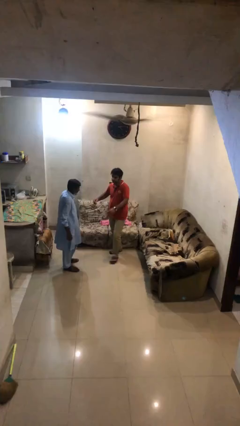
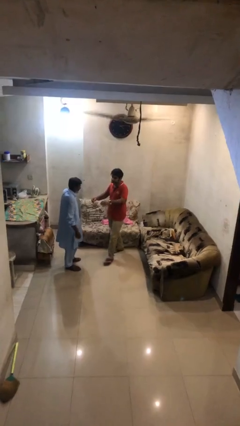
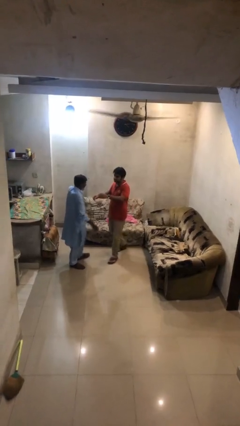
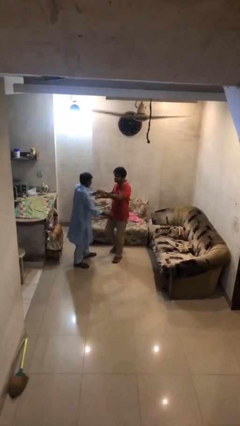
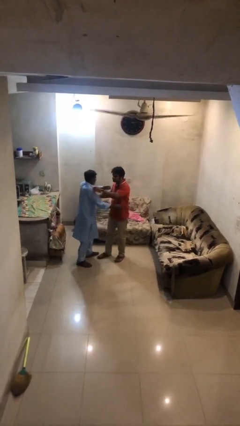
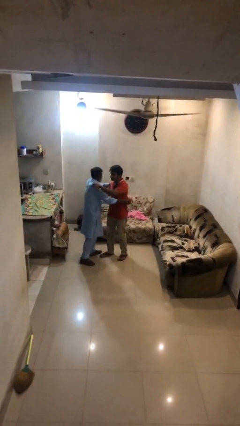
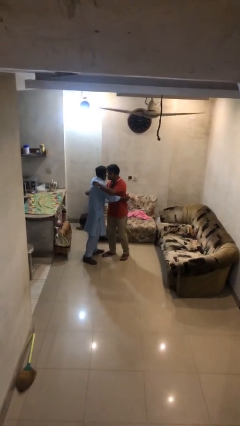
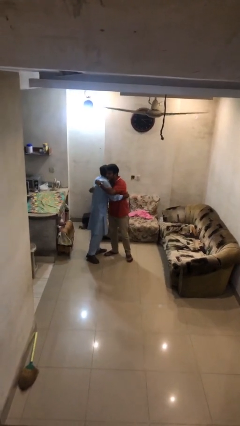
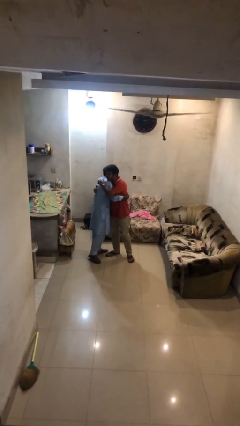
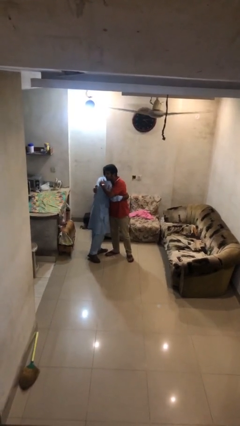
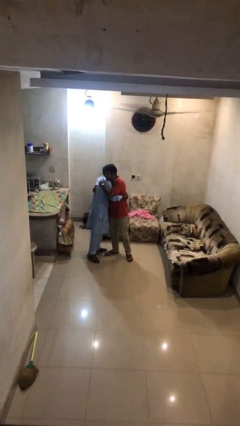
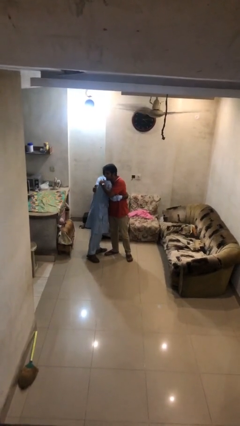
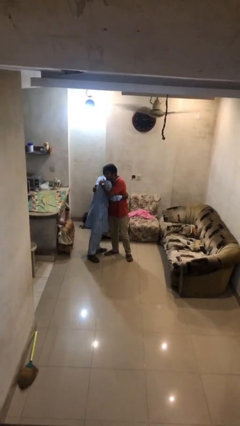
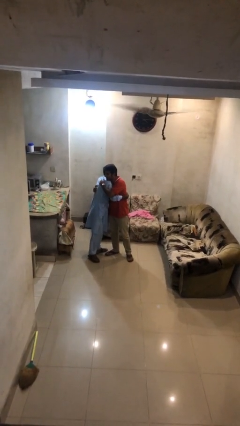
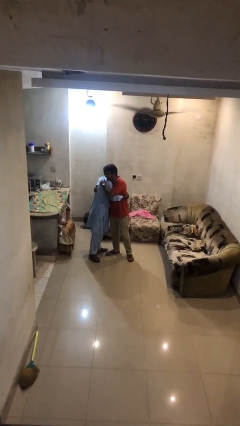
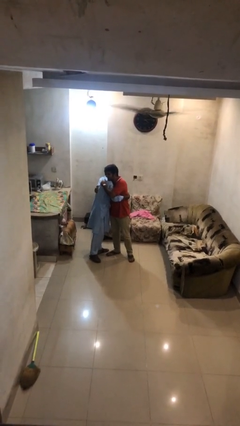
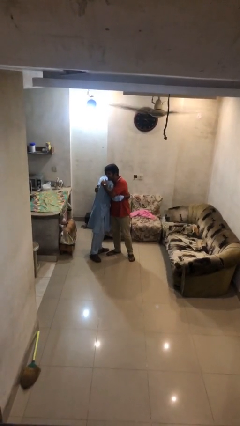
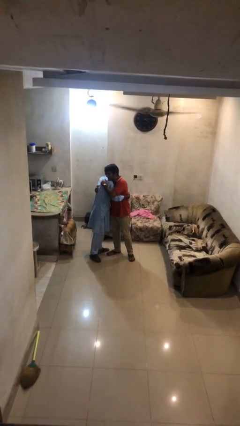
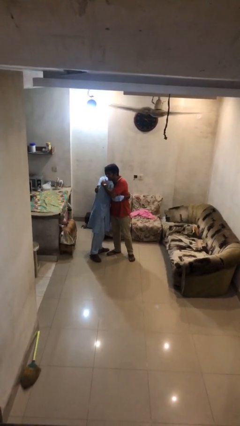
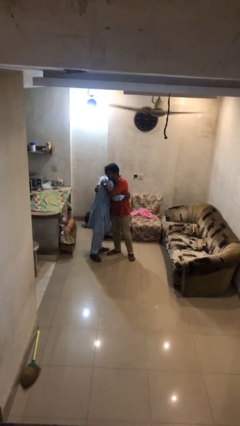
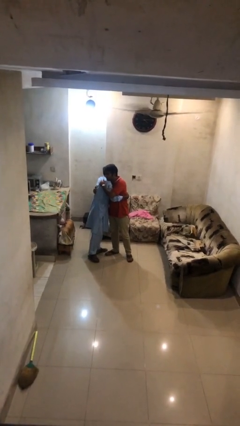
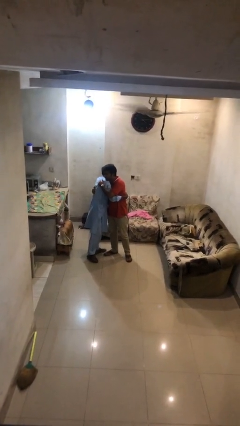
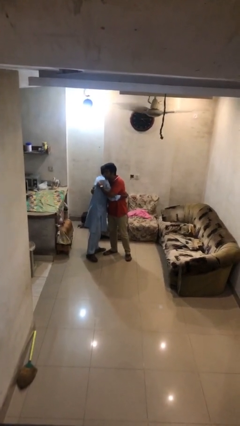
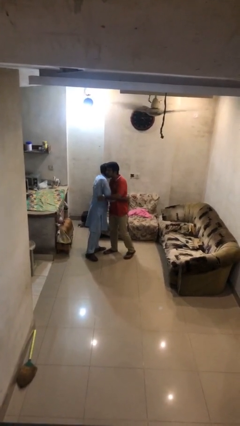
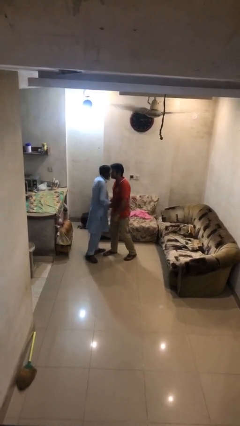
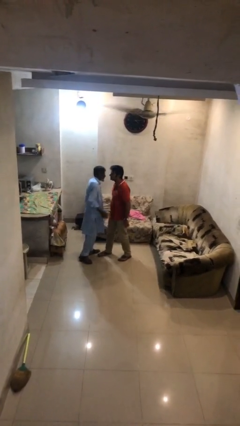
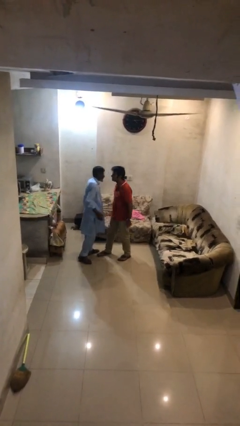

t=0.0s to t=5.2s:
person embraces person

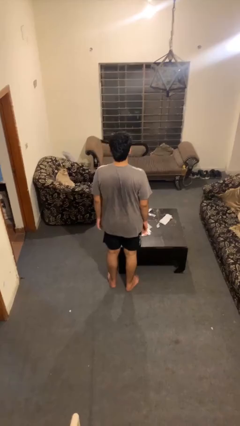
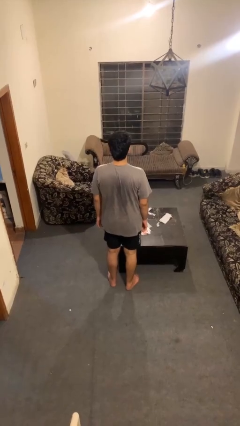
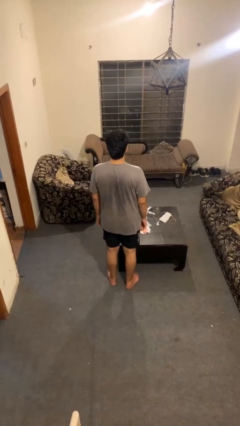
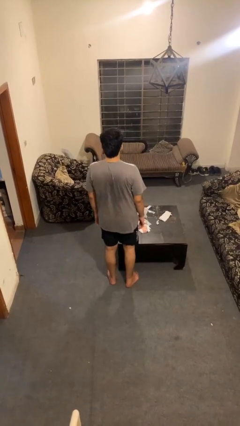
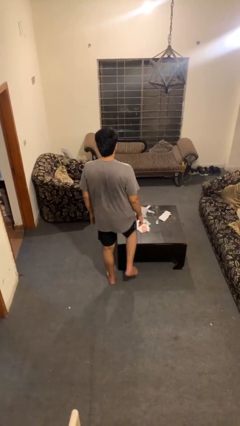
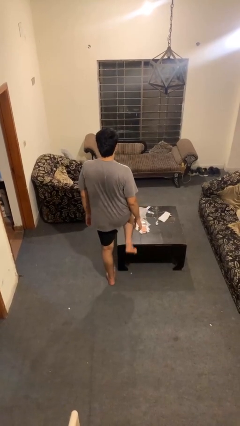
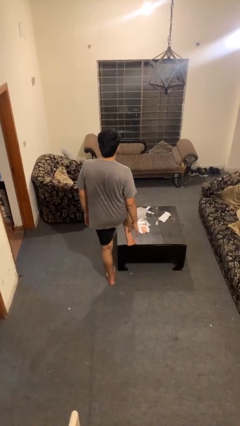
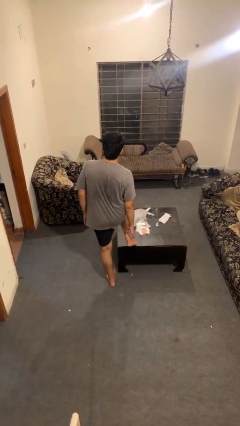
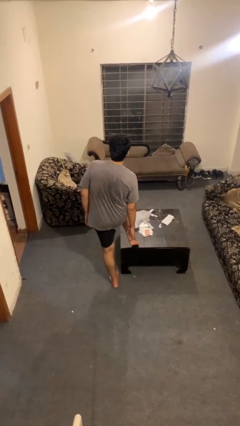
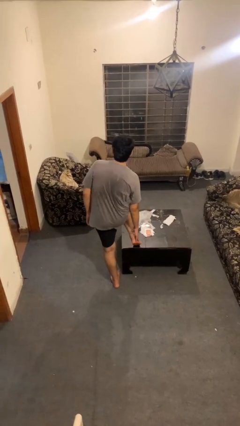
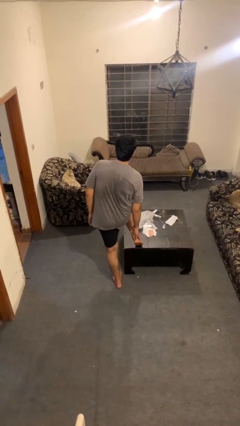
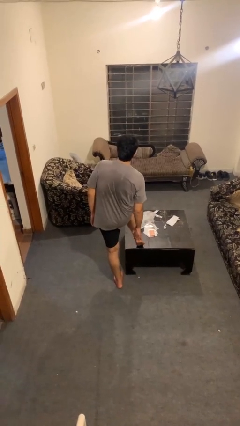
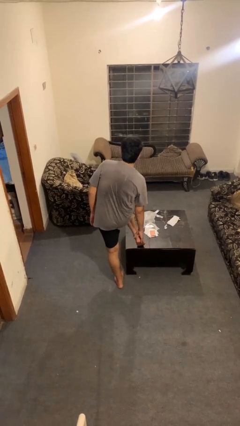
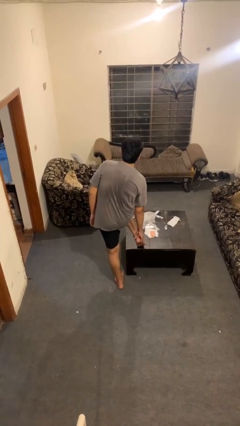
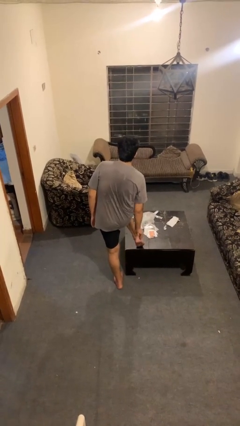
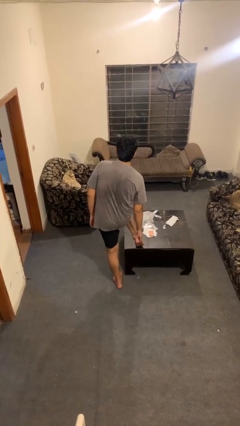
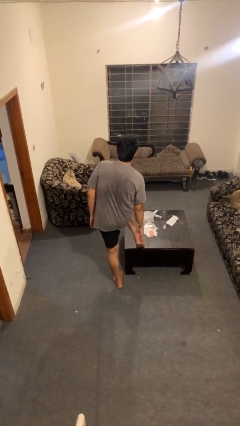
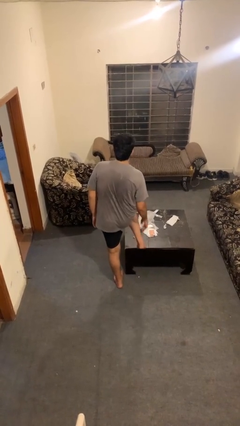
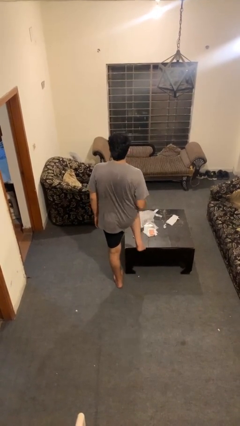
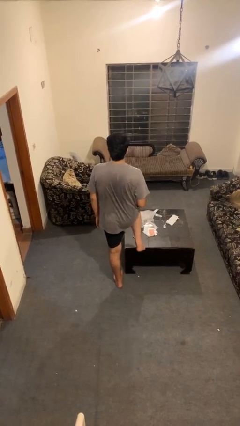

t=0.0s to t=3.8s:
person rubs foot

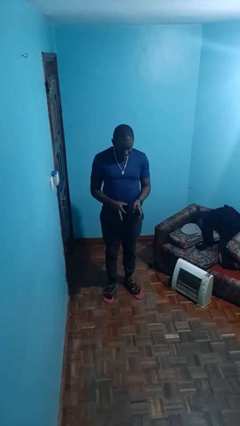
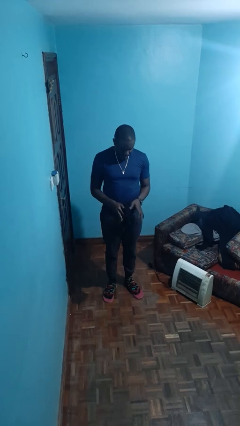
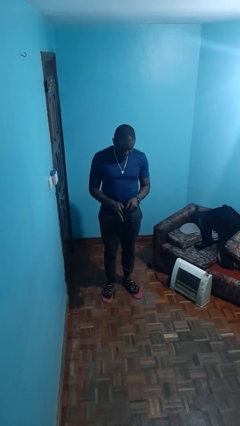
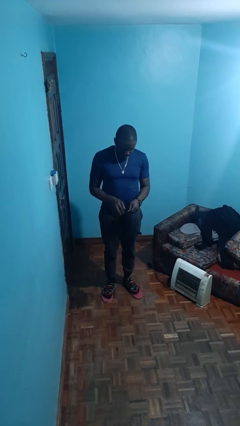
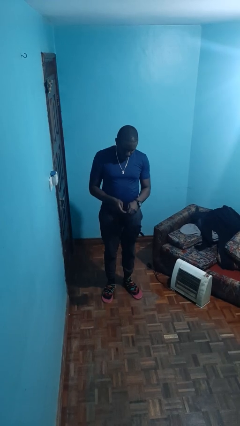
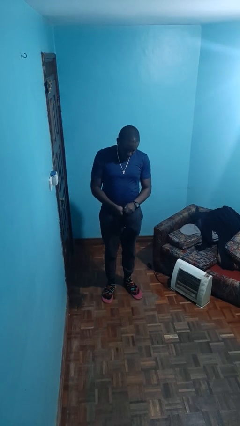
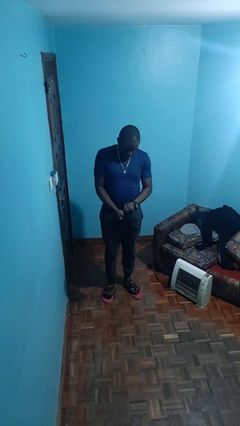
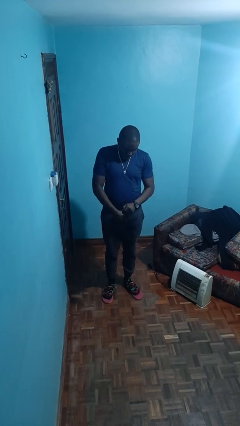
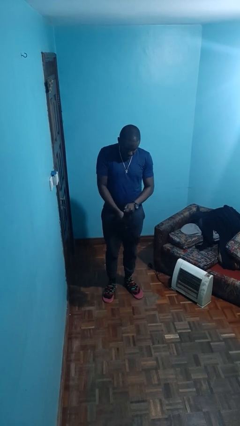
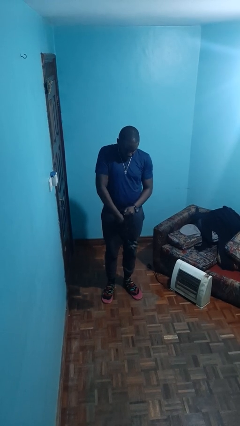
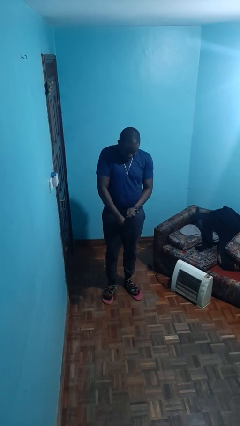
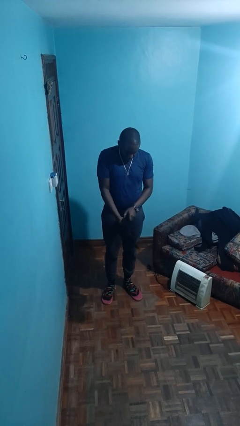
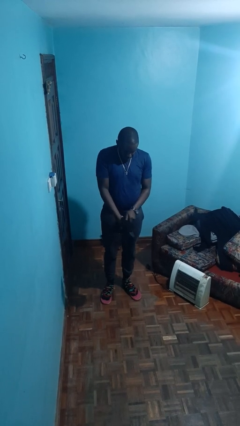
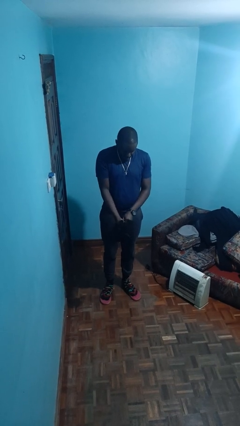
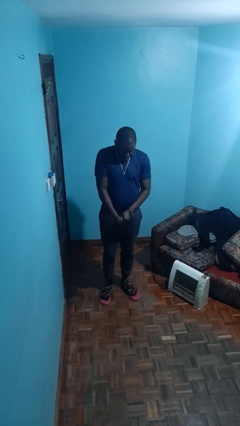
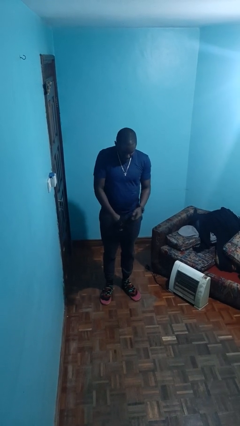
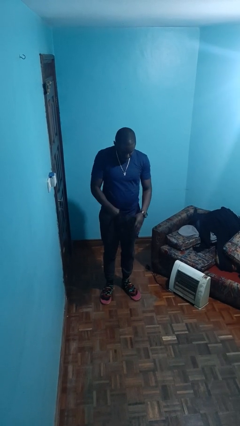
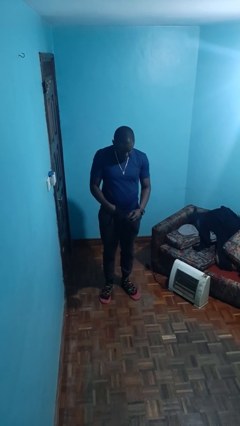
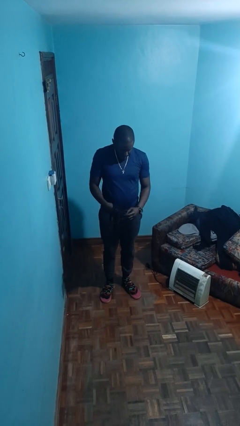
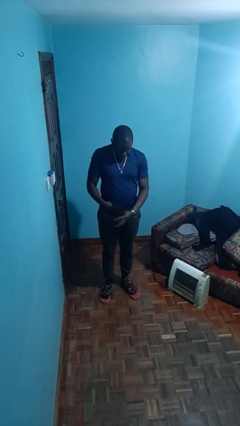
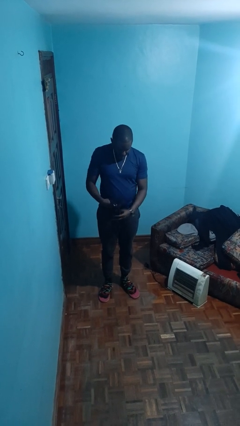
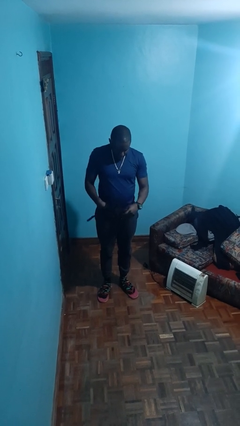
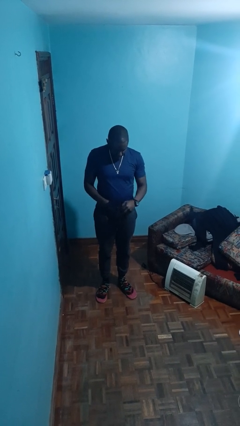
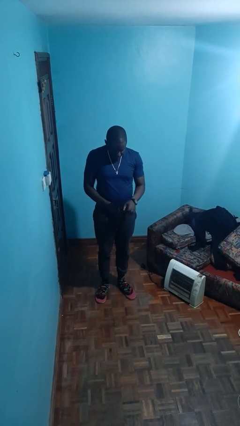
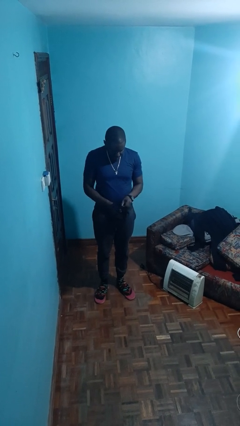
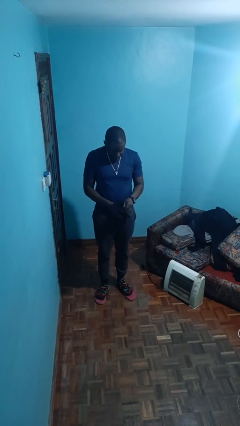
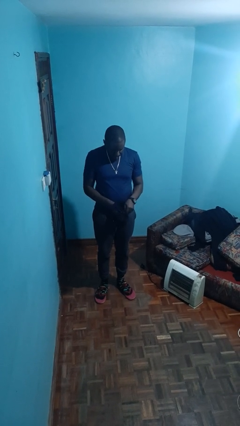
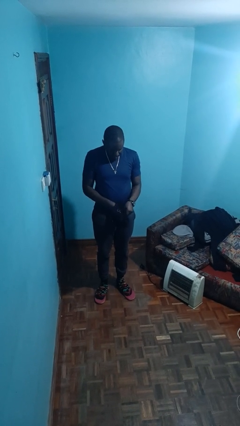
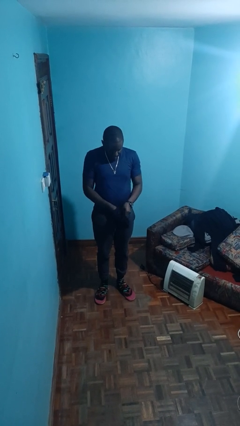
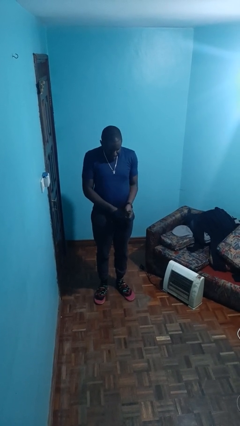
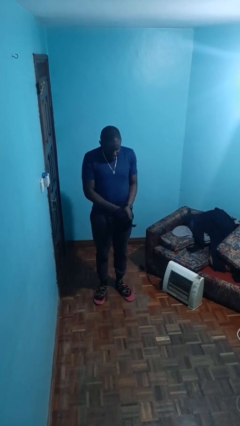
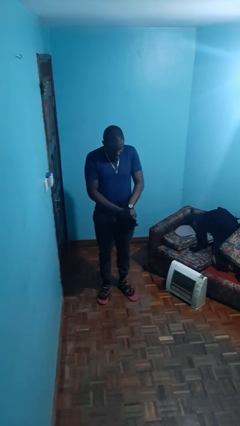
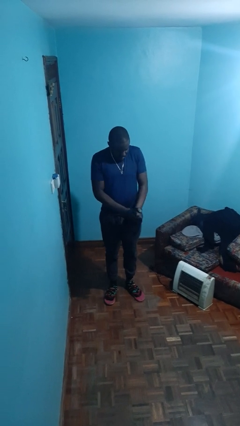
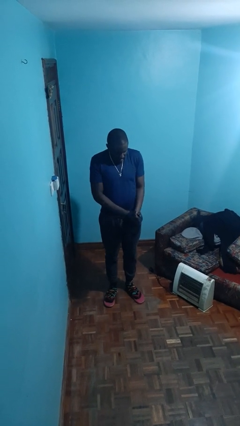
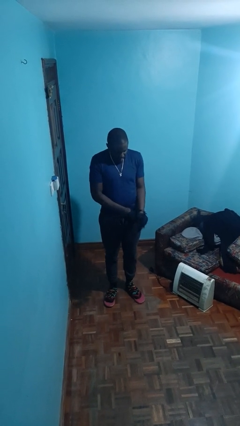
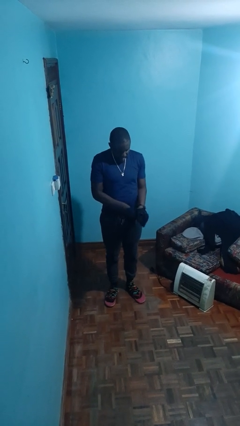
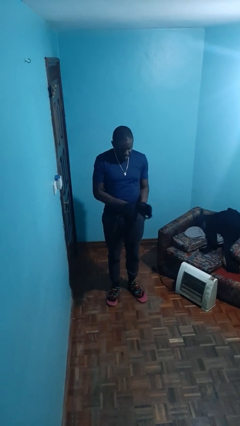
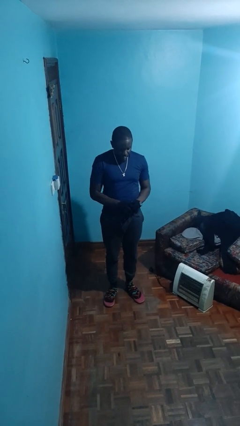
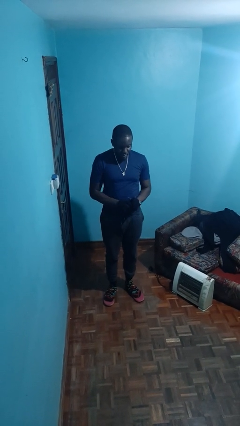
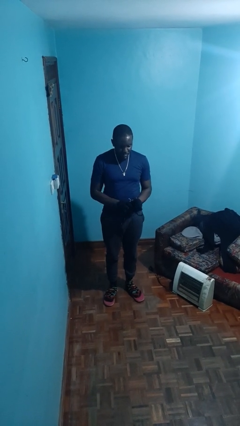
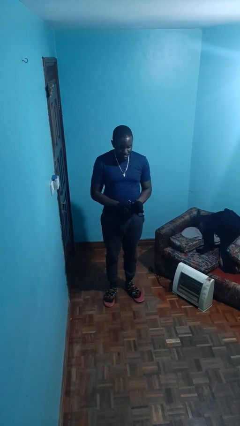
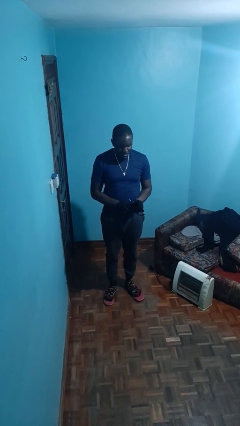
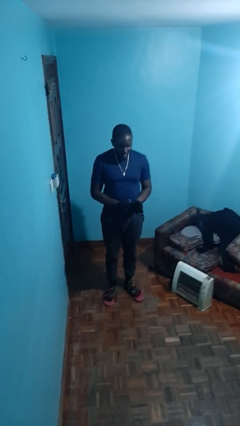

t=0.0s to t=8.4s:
person puts on gloves

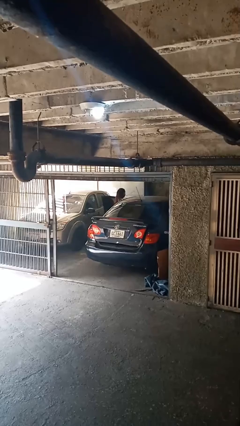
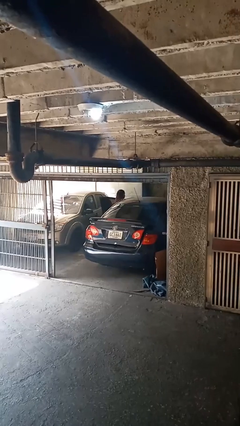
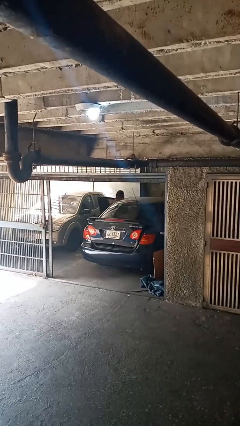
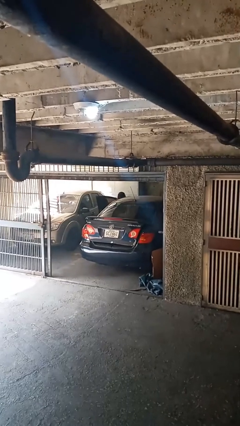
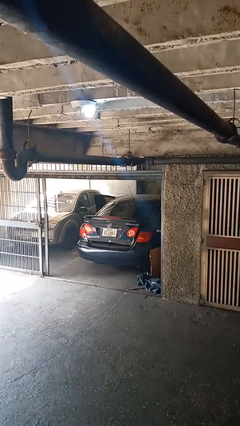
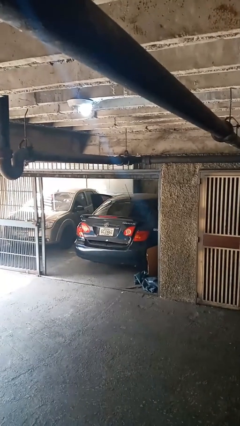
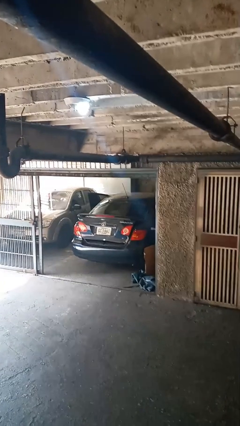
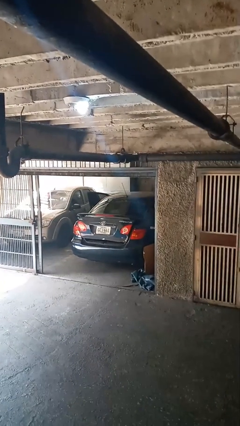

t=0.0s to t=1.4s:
person enters car
